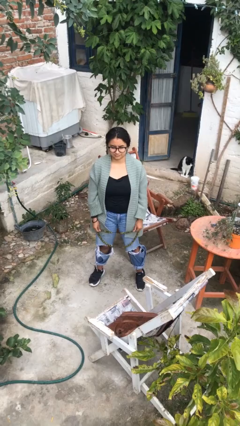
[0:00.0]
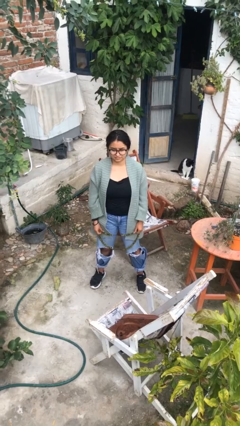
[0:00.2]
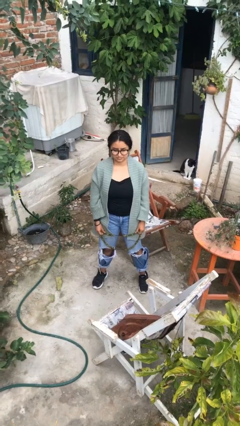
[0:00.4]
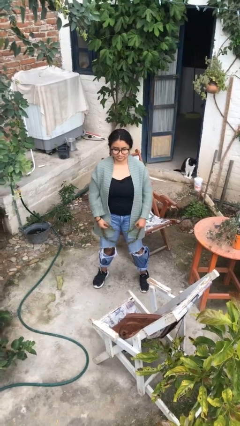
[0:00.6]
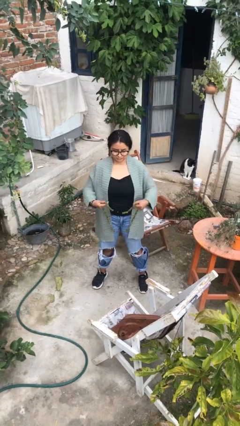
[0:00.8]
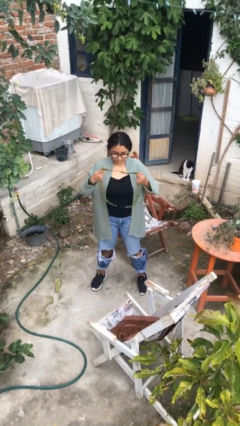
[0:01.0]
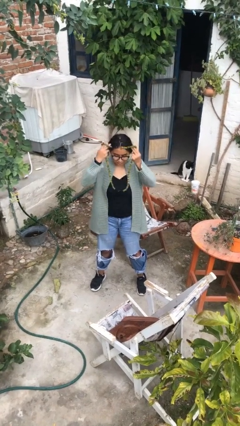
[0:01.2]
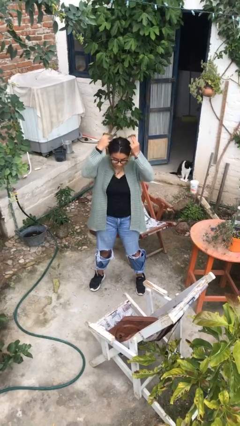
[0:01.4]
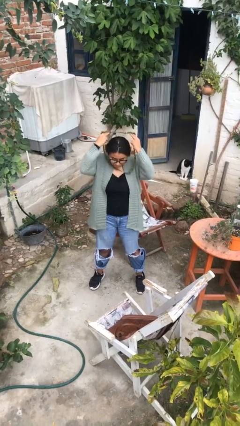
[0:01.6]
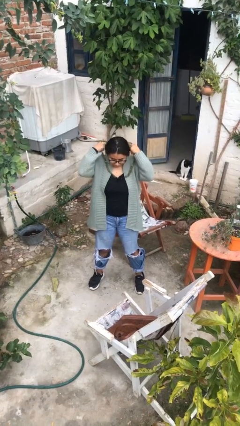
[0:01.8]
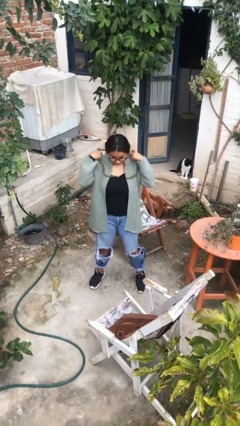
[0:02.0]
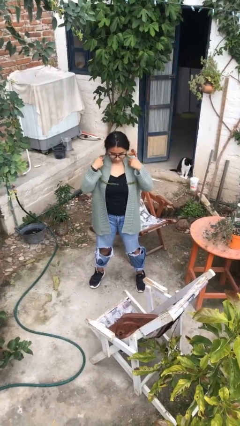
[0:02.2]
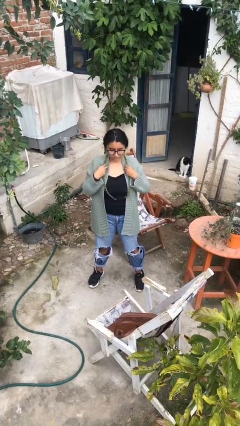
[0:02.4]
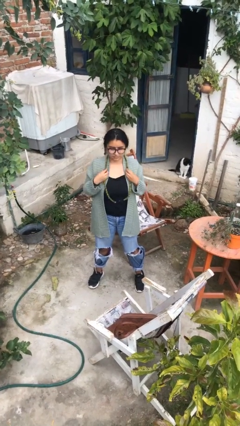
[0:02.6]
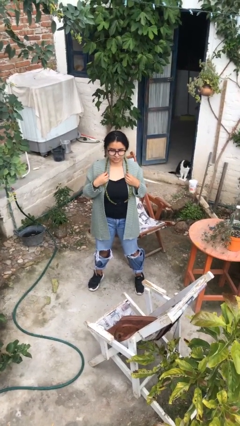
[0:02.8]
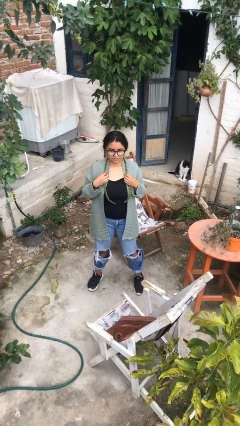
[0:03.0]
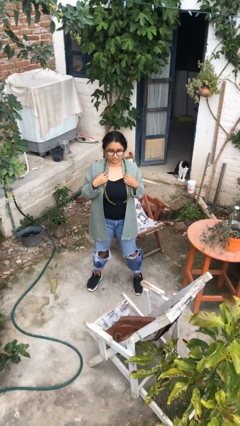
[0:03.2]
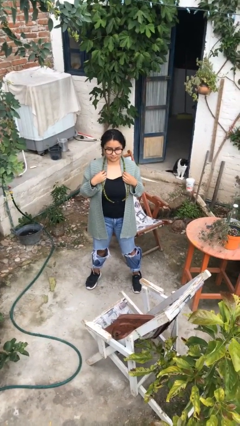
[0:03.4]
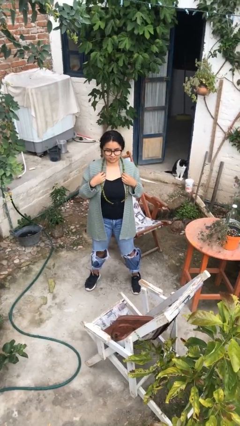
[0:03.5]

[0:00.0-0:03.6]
person puts on necklace

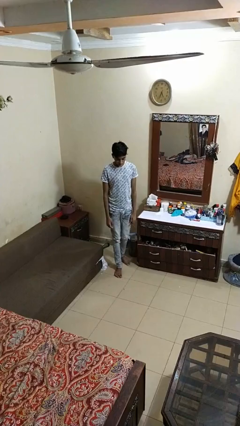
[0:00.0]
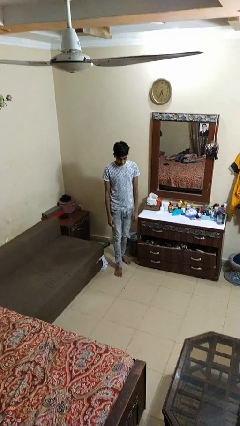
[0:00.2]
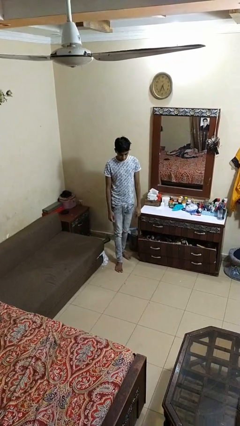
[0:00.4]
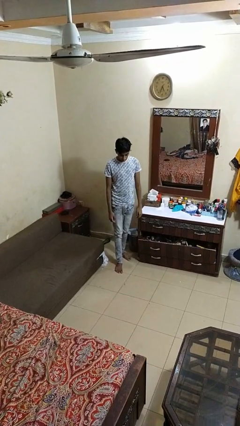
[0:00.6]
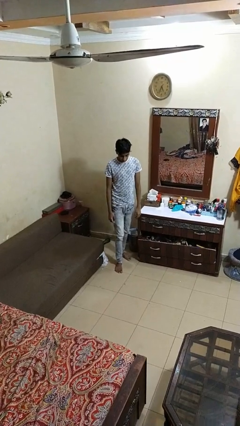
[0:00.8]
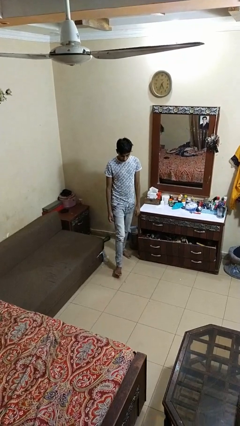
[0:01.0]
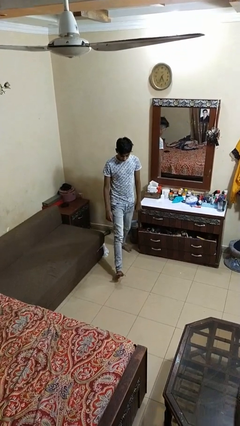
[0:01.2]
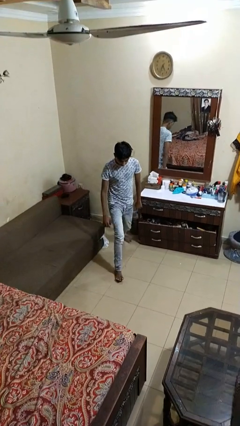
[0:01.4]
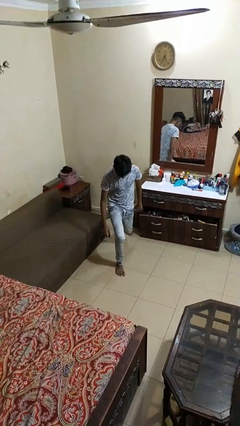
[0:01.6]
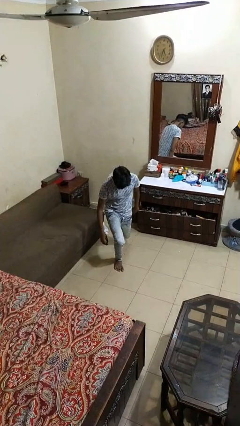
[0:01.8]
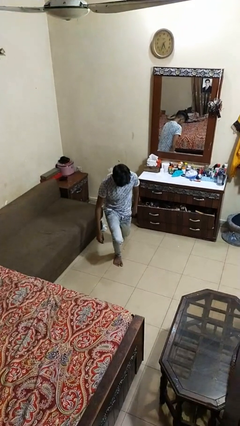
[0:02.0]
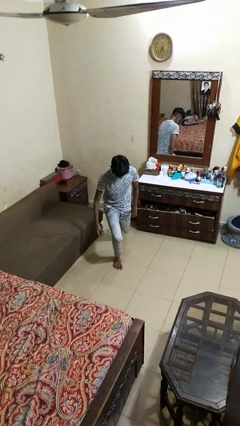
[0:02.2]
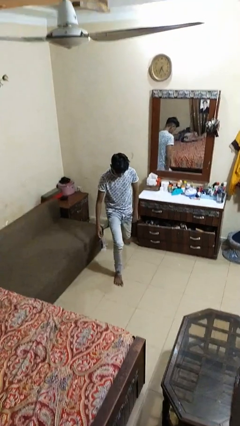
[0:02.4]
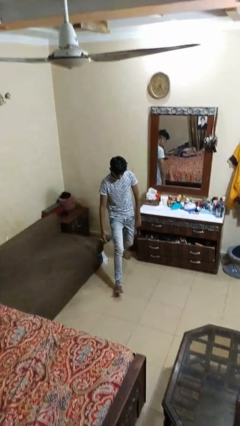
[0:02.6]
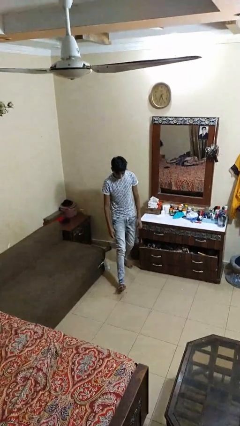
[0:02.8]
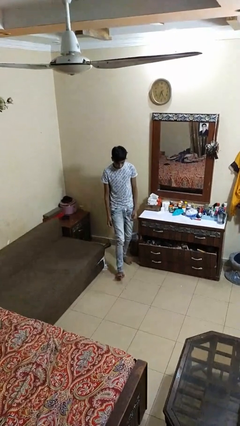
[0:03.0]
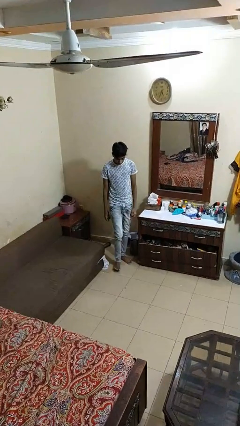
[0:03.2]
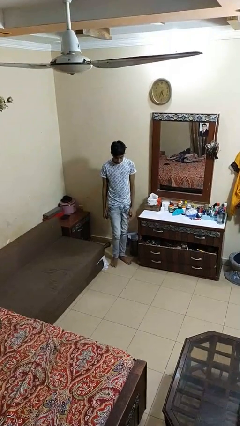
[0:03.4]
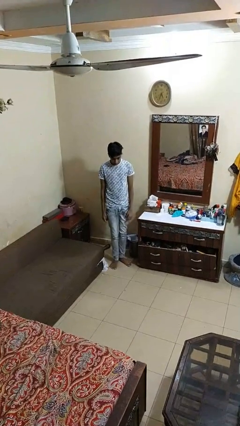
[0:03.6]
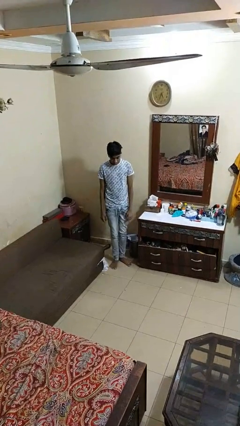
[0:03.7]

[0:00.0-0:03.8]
person exercises with lunges

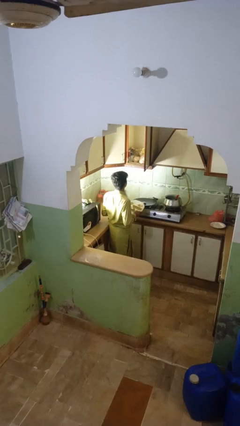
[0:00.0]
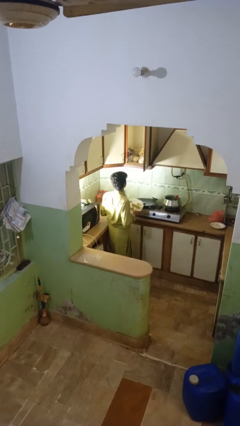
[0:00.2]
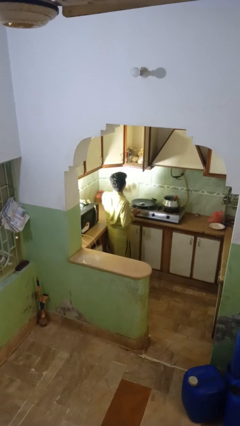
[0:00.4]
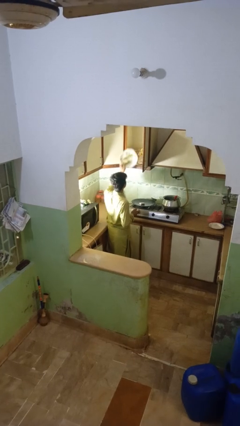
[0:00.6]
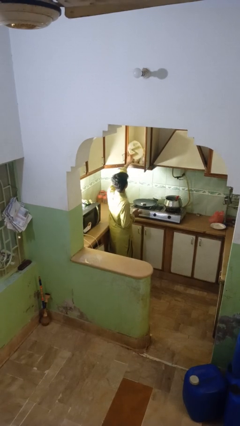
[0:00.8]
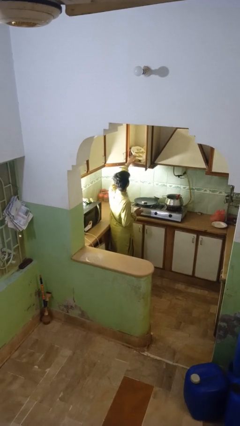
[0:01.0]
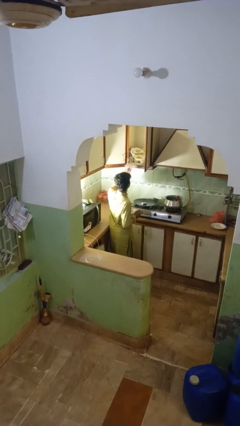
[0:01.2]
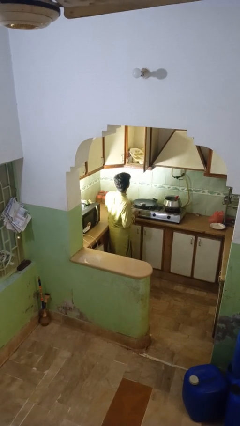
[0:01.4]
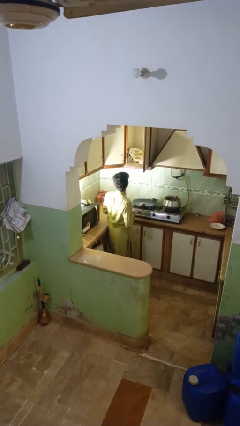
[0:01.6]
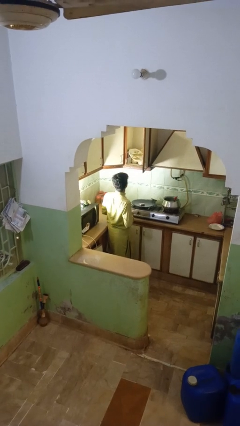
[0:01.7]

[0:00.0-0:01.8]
person puts object in cabinet

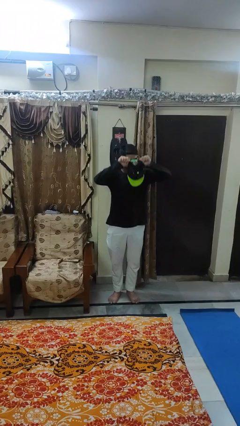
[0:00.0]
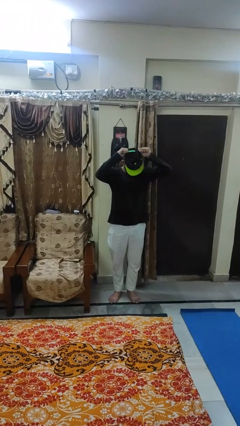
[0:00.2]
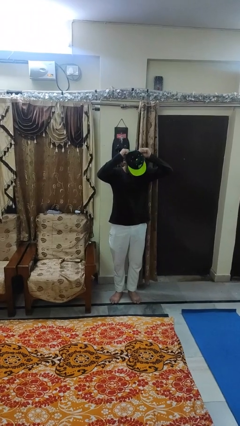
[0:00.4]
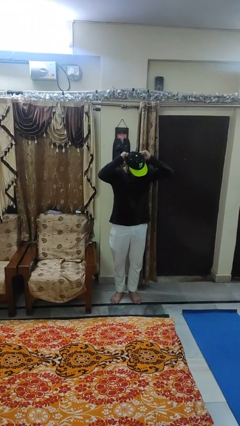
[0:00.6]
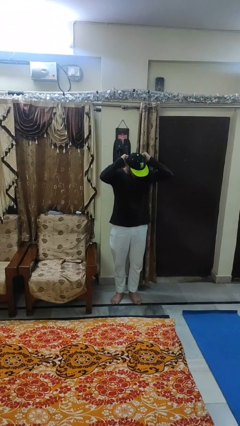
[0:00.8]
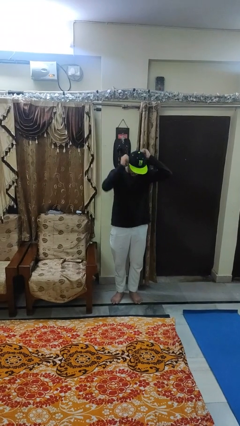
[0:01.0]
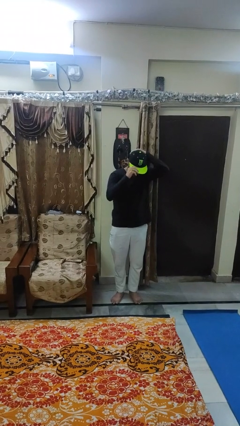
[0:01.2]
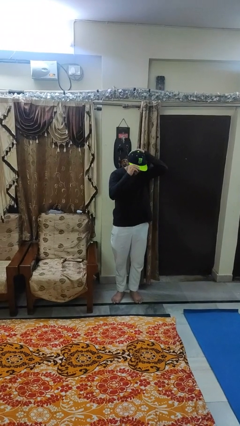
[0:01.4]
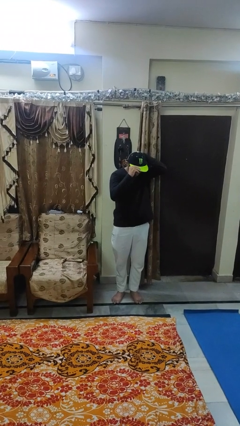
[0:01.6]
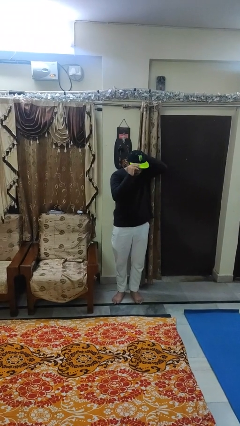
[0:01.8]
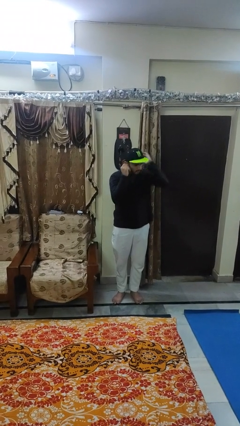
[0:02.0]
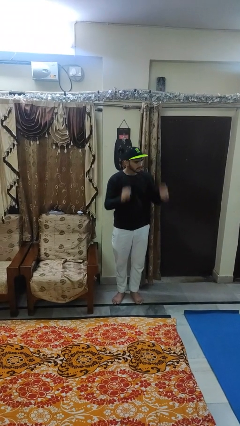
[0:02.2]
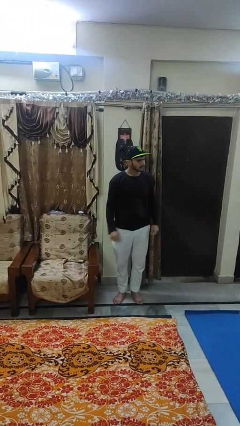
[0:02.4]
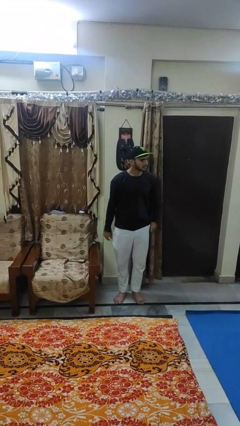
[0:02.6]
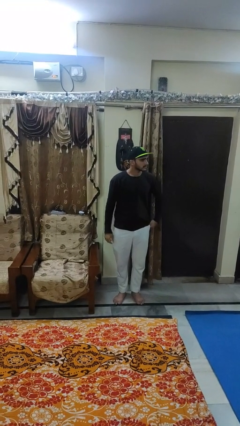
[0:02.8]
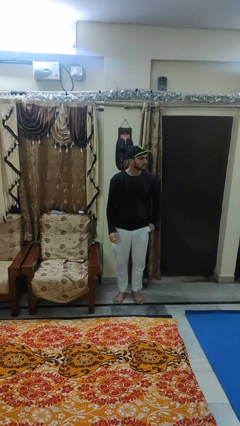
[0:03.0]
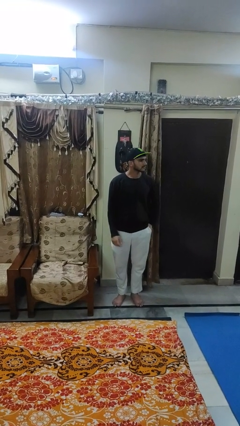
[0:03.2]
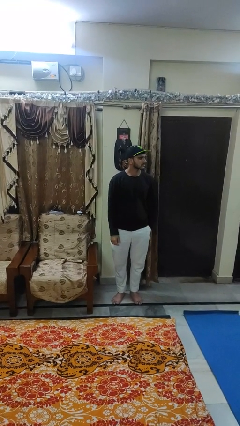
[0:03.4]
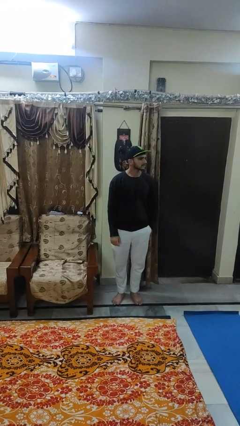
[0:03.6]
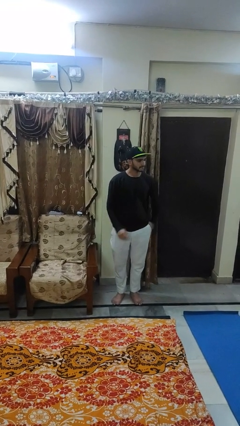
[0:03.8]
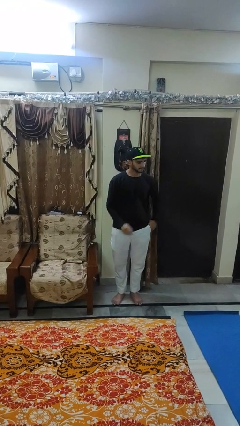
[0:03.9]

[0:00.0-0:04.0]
person puts on hat

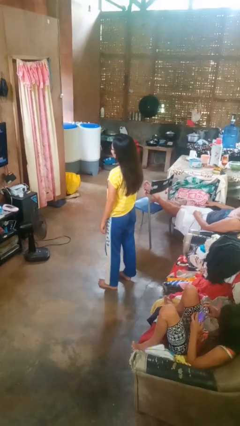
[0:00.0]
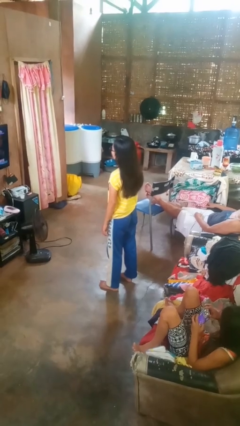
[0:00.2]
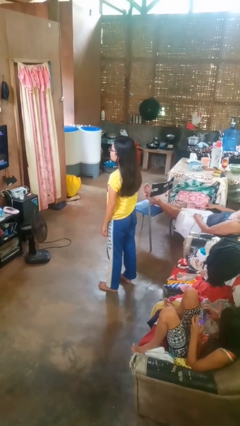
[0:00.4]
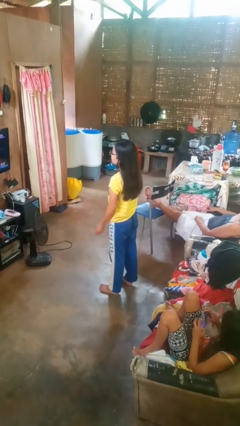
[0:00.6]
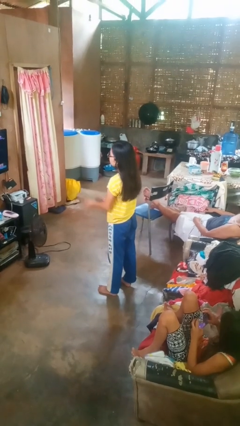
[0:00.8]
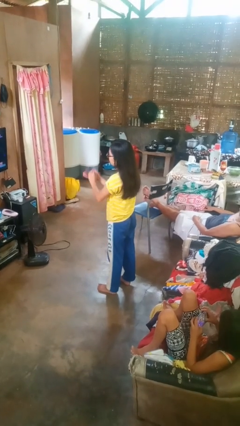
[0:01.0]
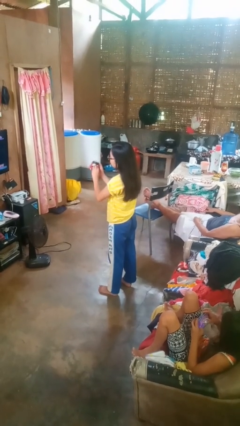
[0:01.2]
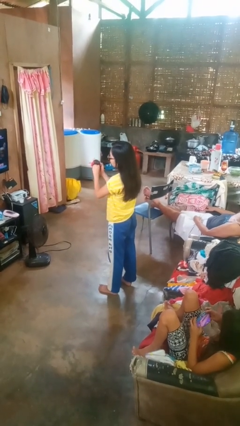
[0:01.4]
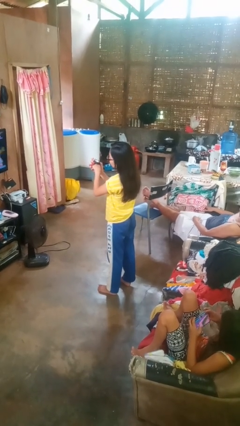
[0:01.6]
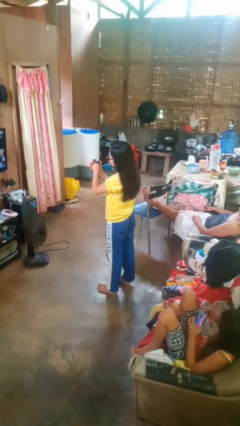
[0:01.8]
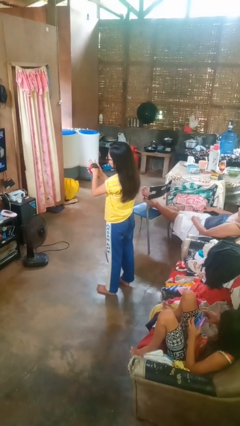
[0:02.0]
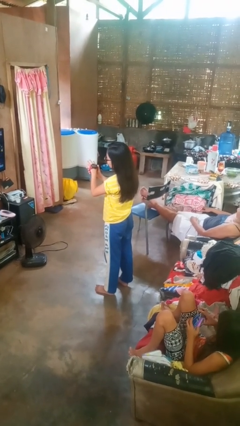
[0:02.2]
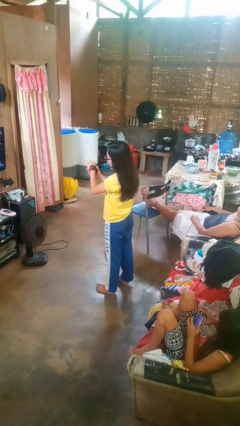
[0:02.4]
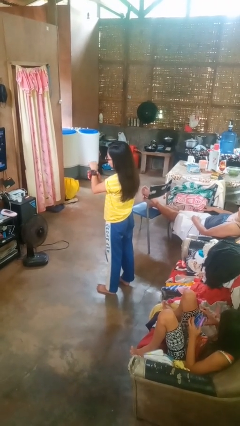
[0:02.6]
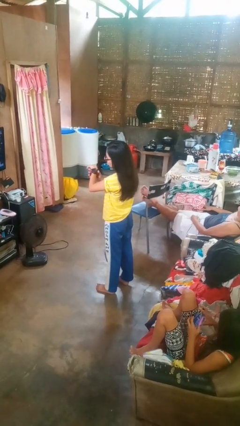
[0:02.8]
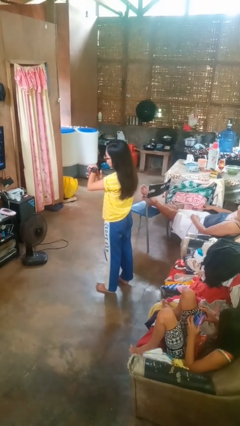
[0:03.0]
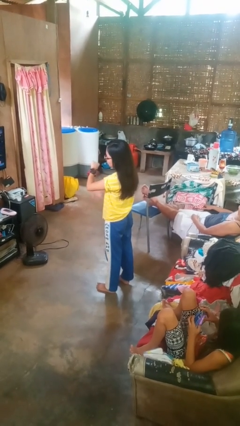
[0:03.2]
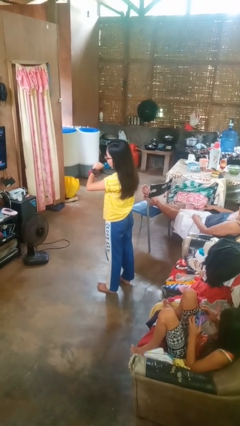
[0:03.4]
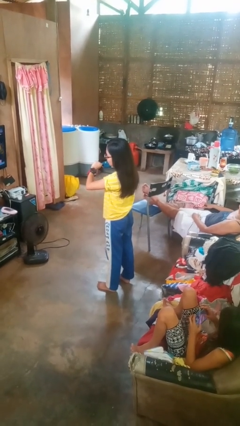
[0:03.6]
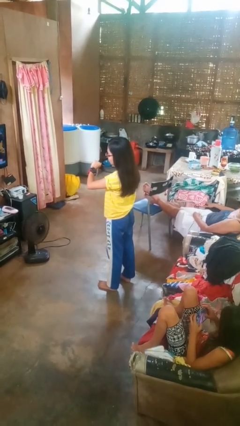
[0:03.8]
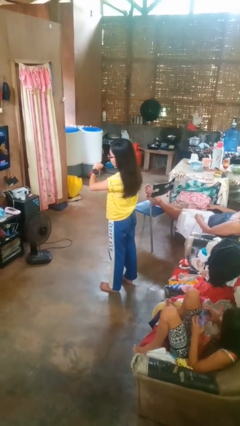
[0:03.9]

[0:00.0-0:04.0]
person puts on wristwatch

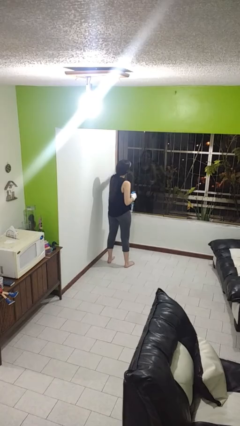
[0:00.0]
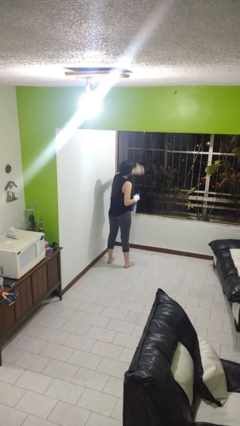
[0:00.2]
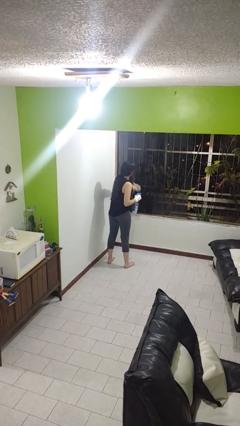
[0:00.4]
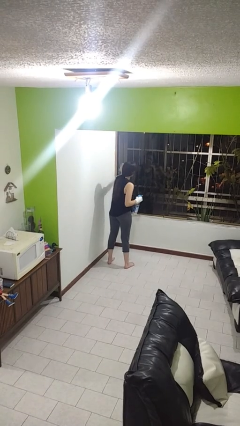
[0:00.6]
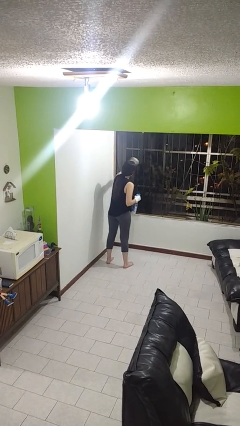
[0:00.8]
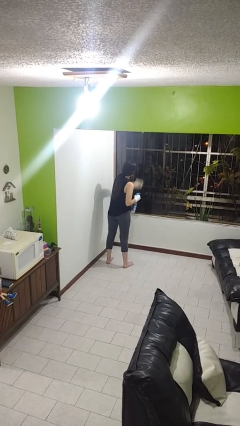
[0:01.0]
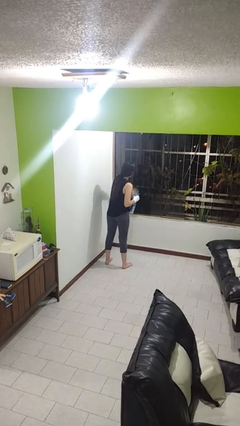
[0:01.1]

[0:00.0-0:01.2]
person washes window
